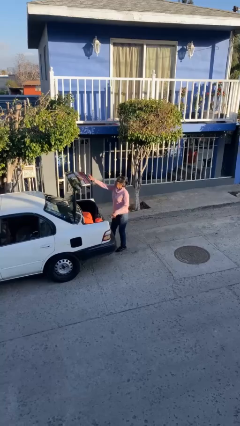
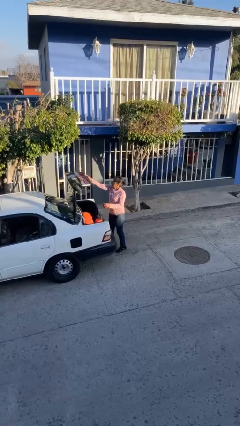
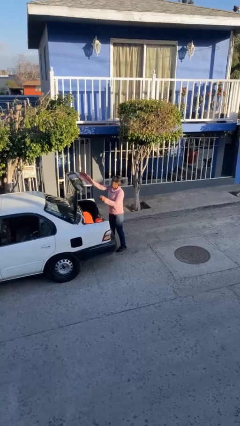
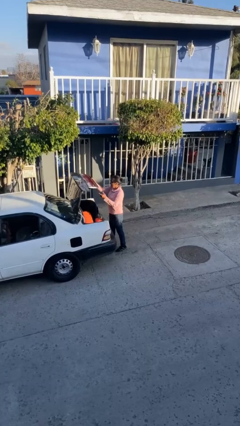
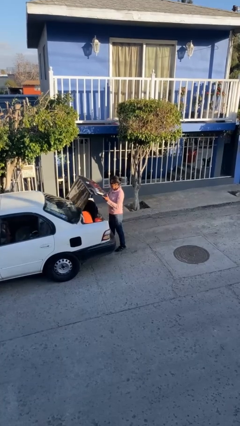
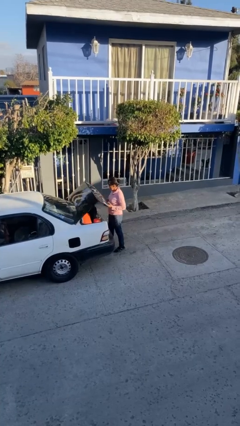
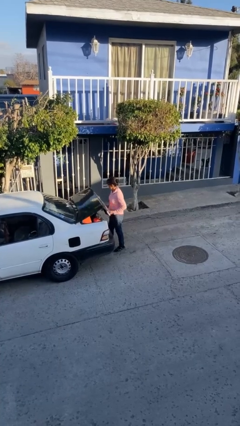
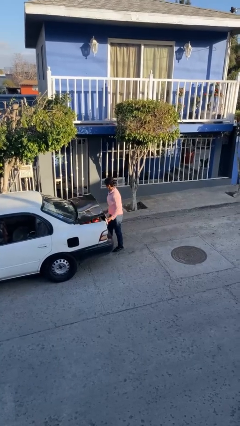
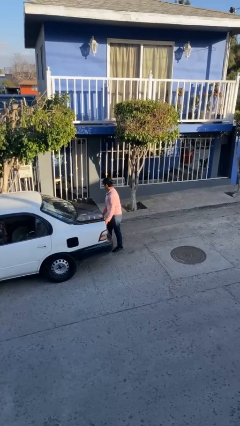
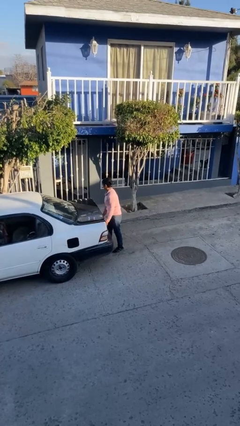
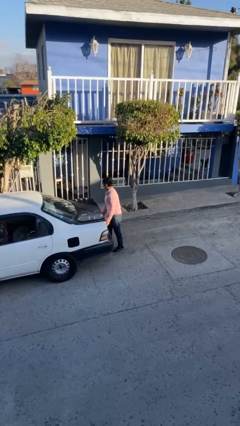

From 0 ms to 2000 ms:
person closes car trunk

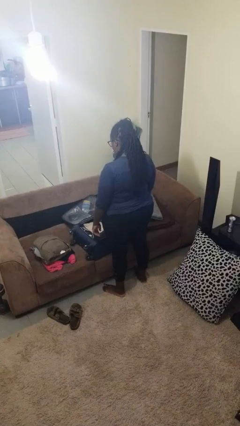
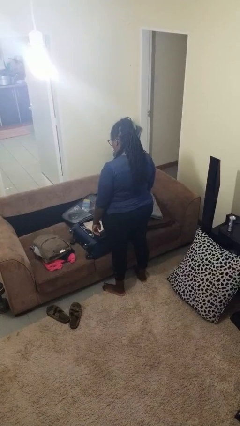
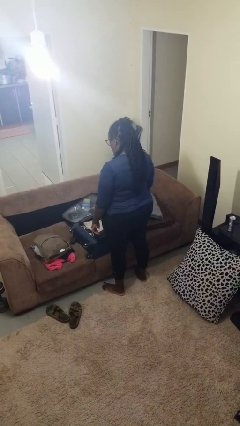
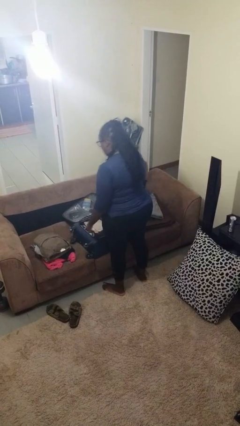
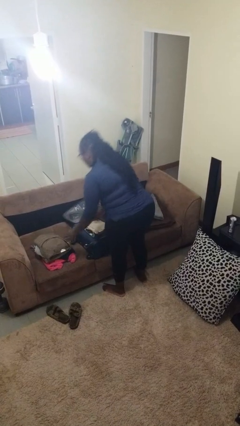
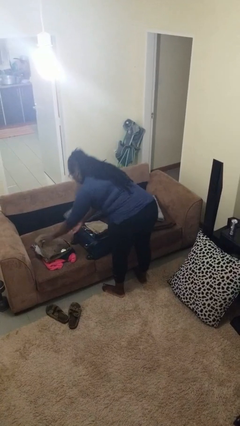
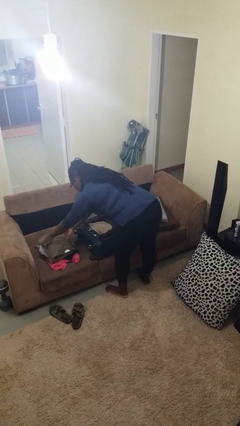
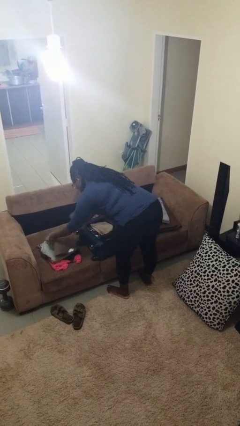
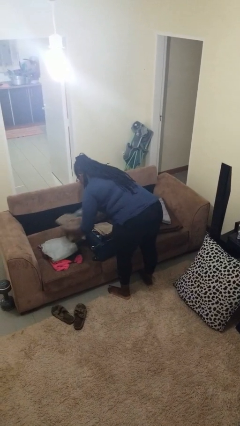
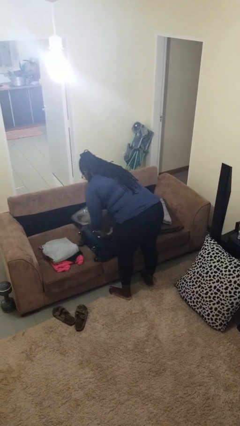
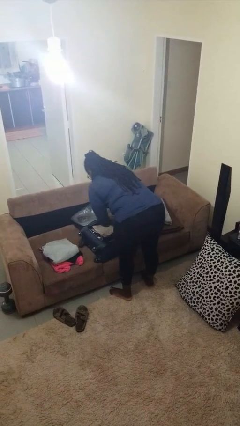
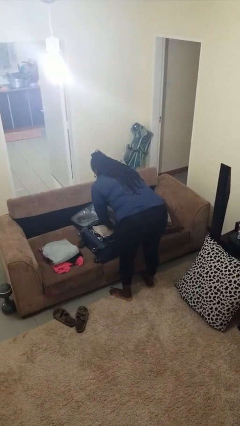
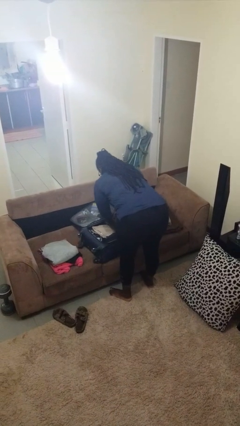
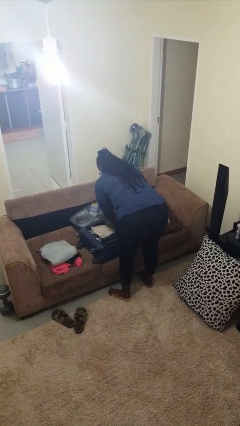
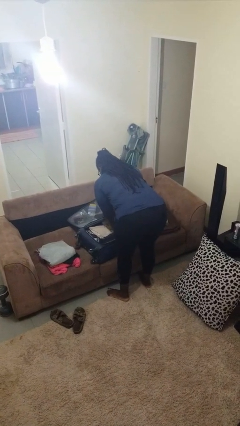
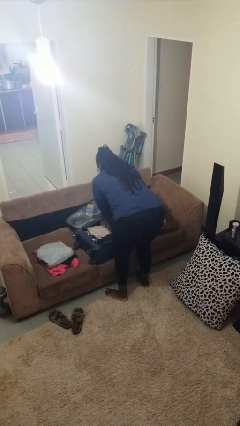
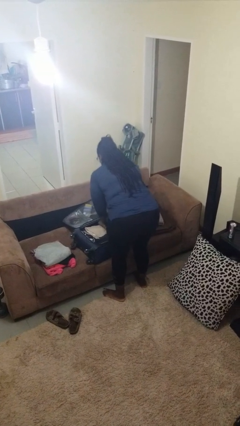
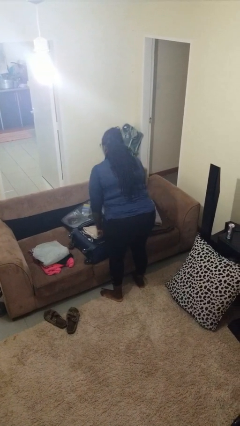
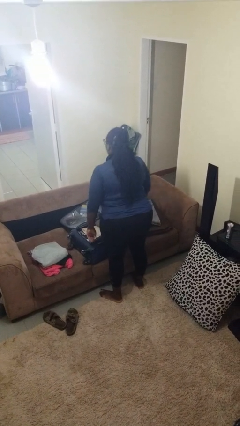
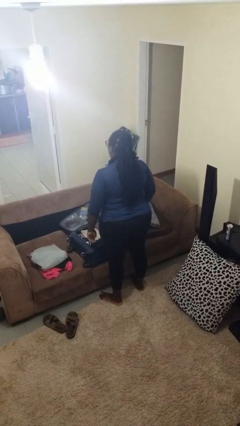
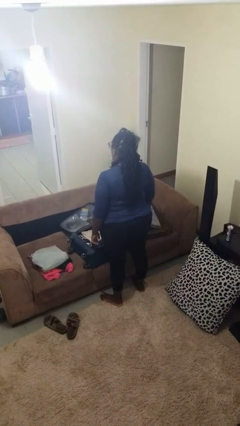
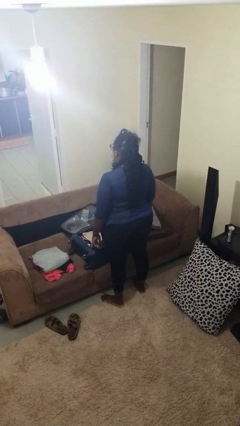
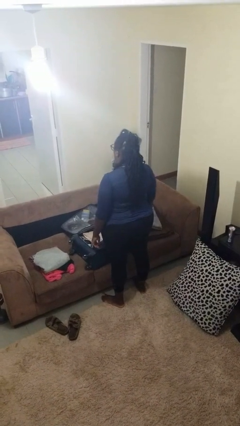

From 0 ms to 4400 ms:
person loads clothes into suitcase

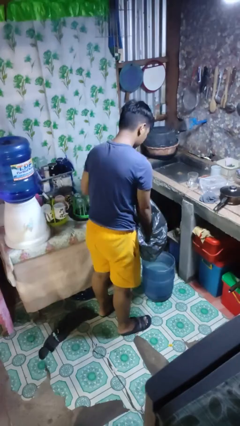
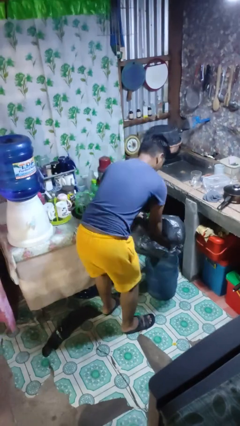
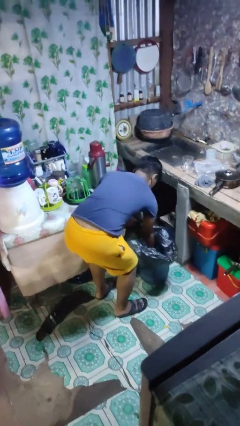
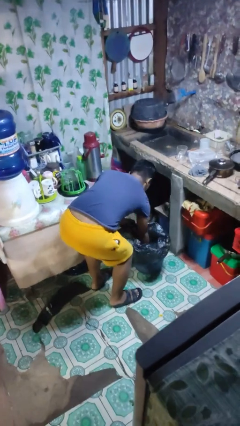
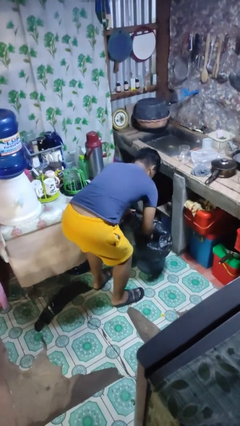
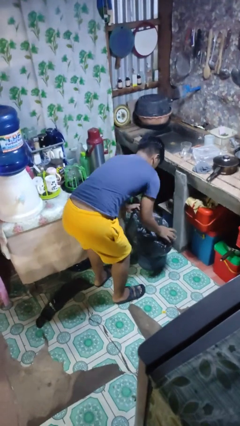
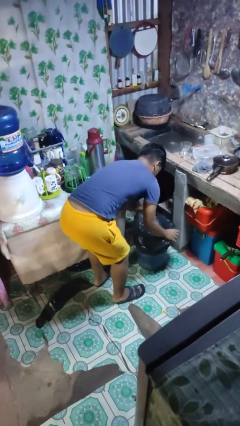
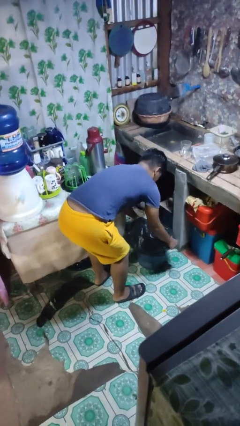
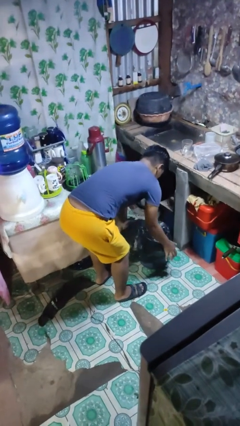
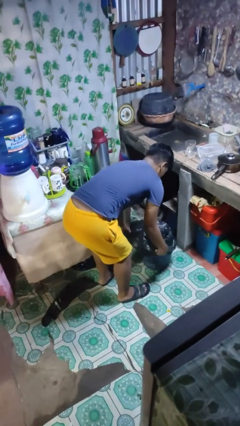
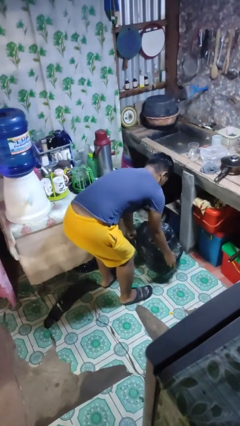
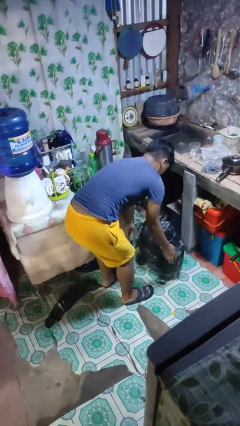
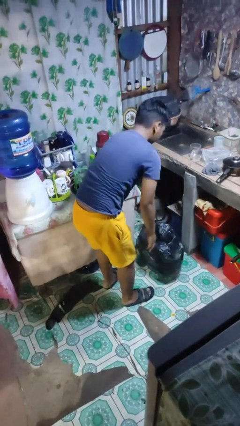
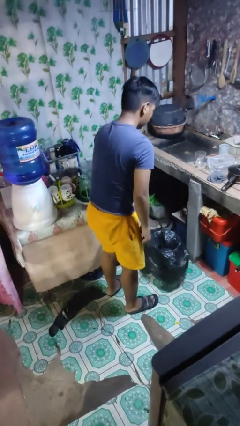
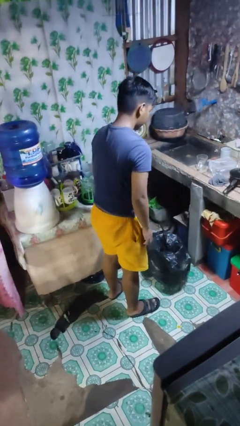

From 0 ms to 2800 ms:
person inserts trashbag into trashcan

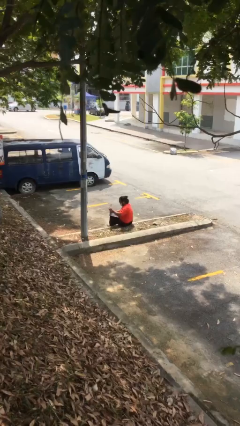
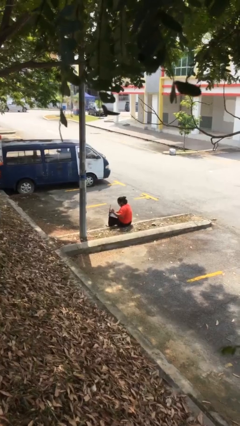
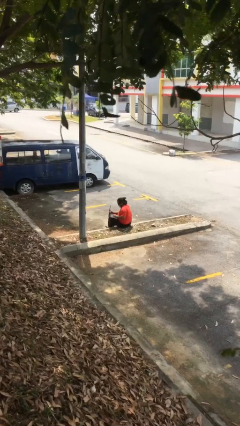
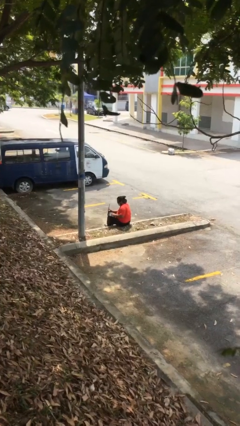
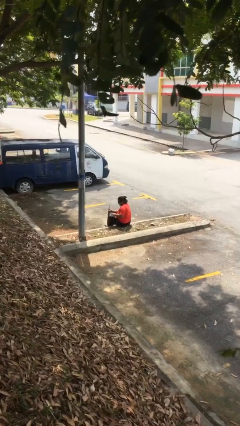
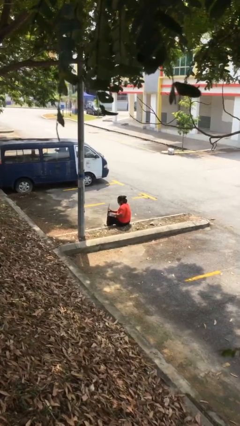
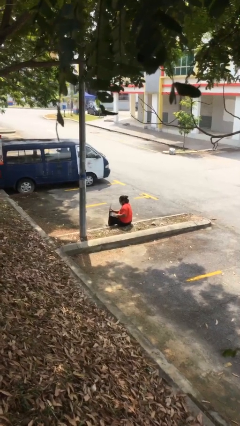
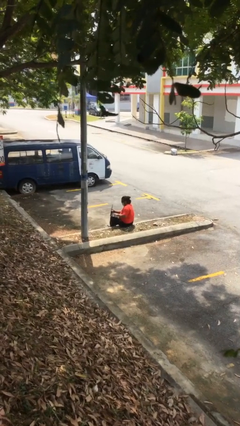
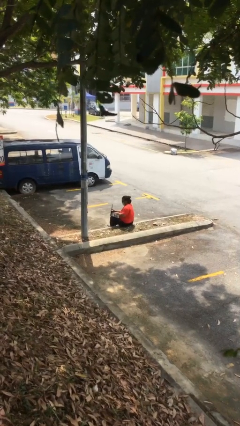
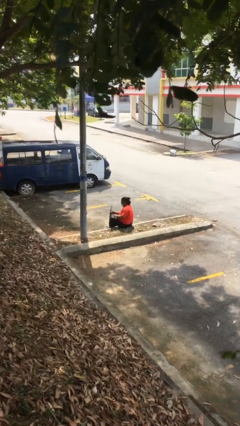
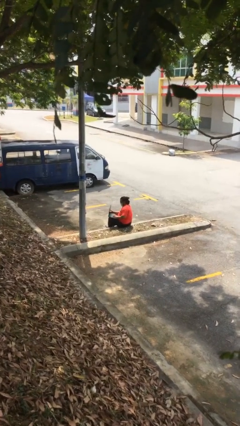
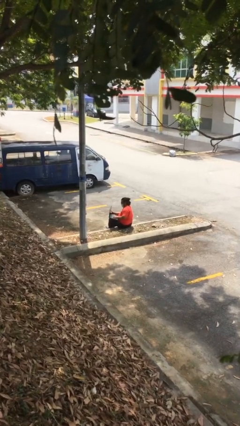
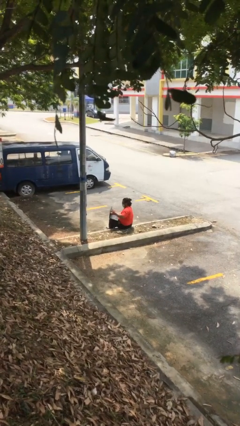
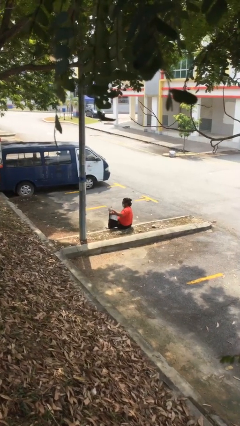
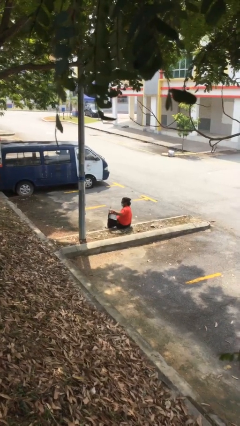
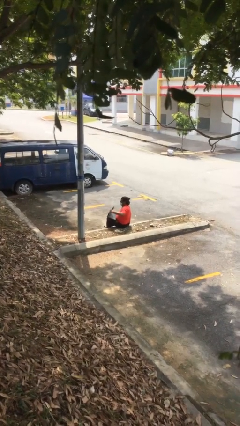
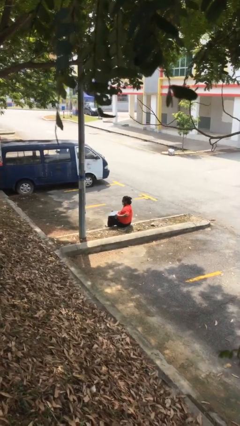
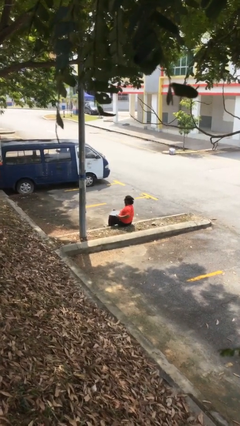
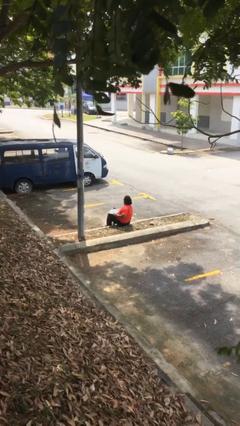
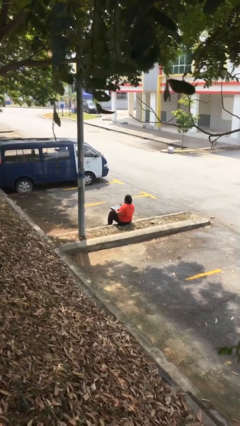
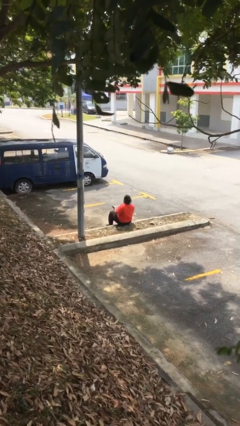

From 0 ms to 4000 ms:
person interacts with laptop

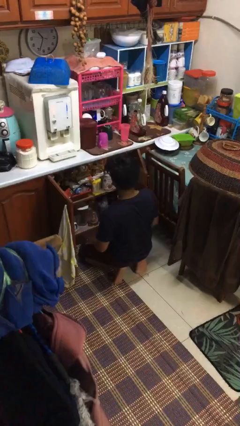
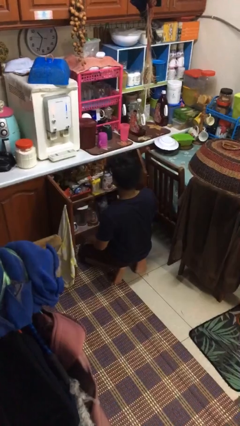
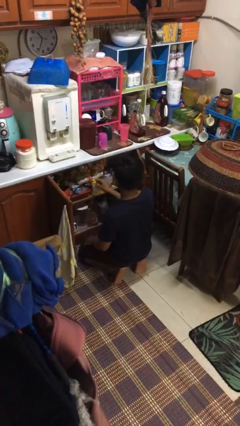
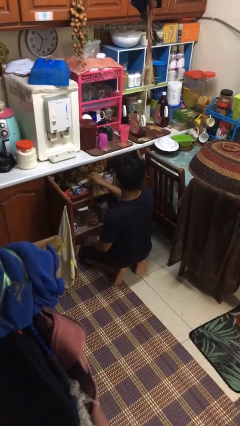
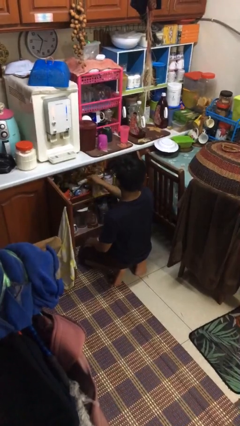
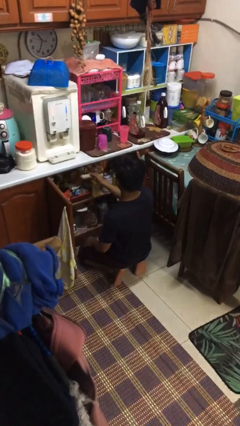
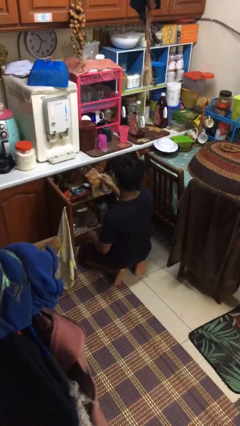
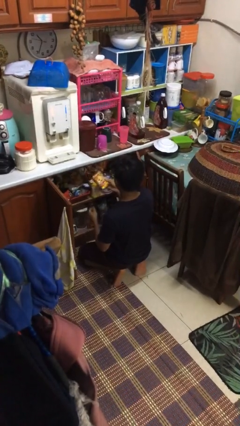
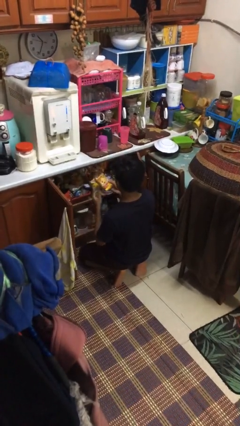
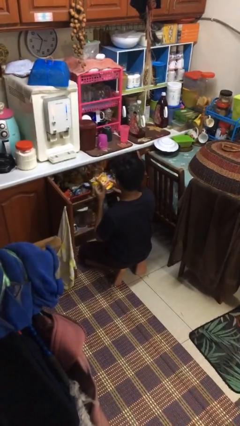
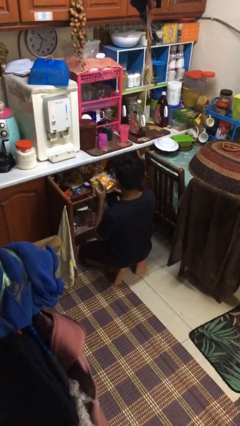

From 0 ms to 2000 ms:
person takes object from cabinet

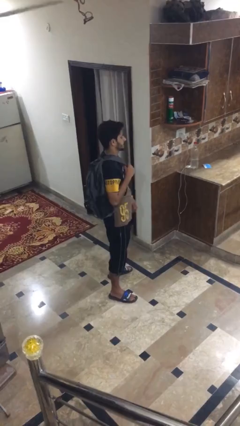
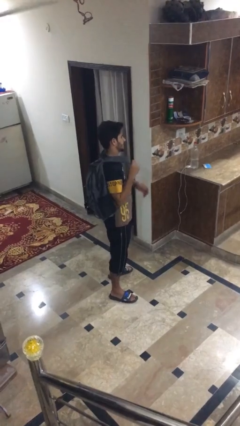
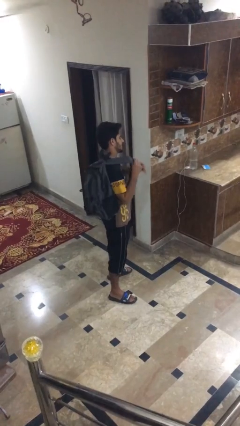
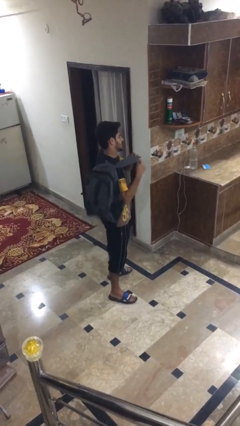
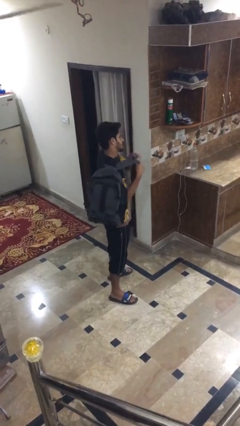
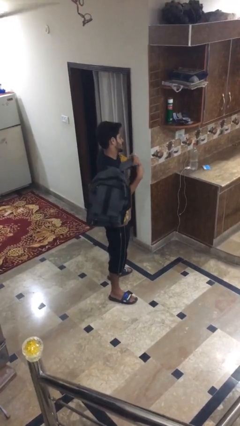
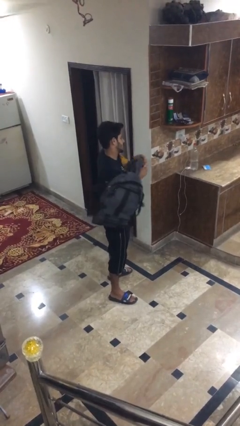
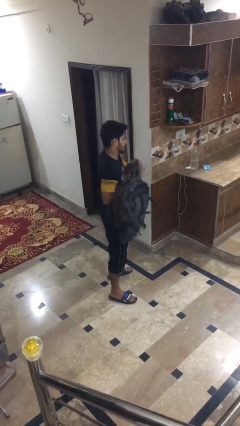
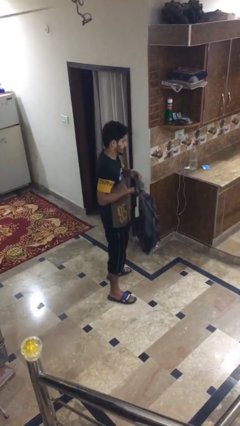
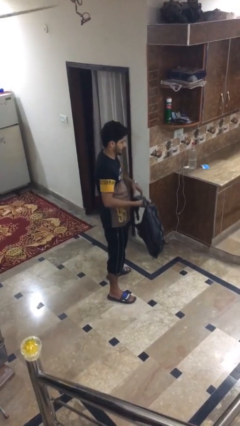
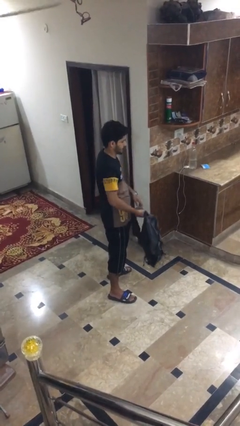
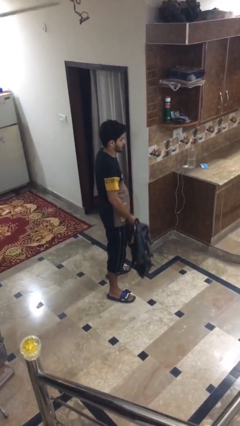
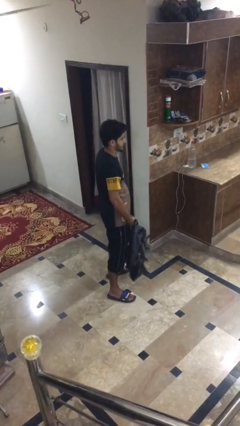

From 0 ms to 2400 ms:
person takes off backpack
